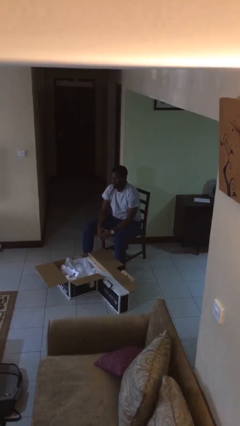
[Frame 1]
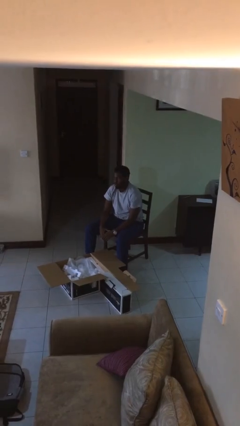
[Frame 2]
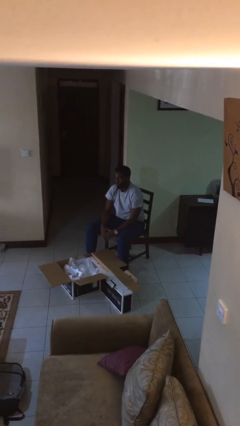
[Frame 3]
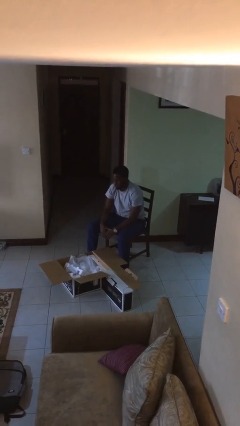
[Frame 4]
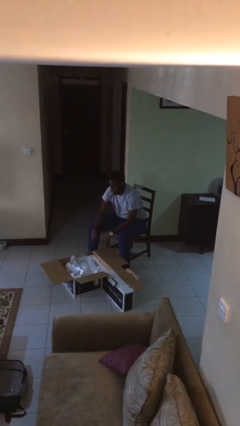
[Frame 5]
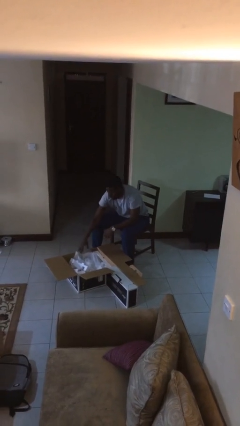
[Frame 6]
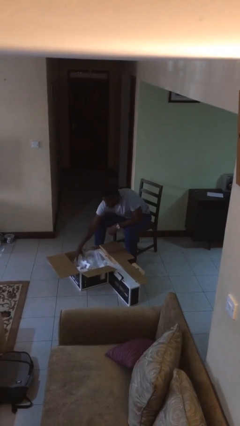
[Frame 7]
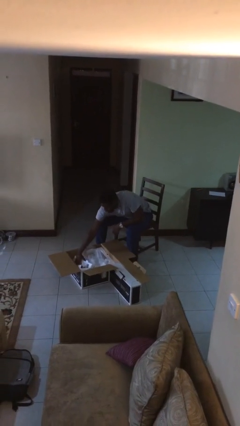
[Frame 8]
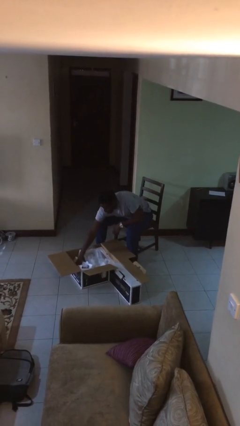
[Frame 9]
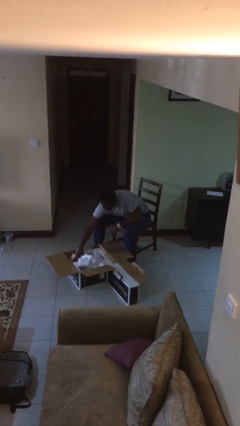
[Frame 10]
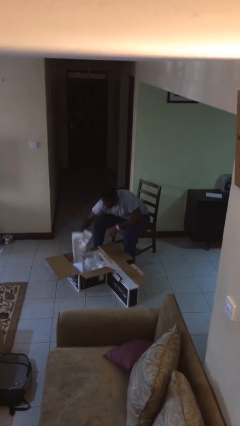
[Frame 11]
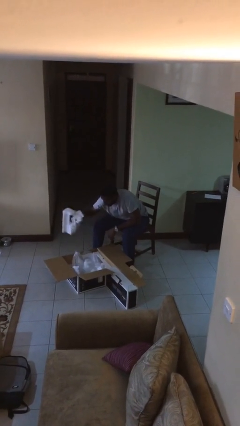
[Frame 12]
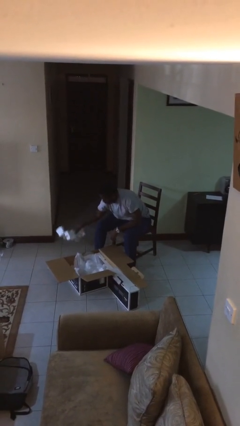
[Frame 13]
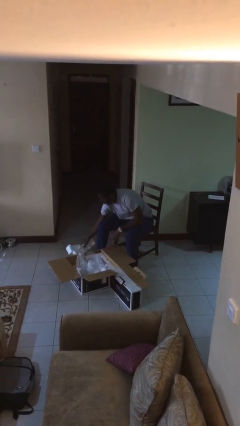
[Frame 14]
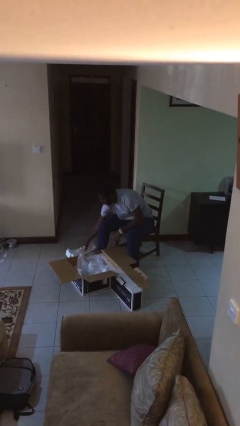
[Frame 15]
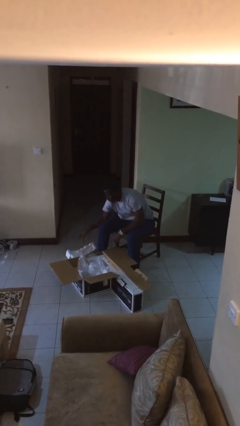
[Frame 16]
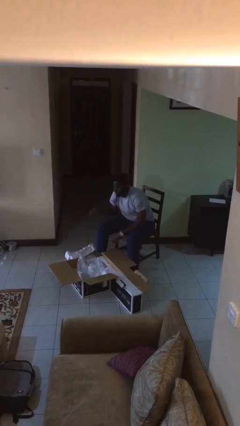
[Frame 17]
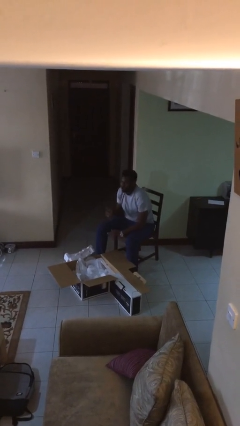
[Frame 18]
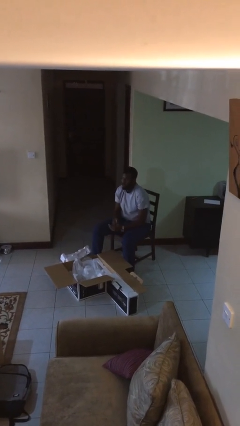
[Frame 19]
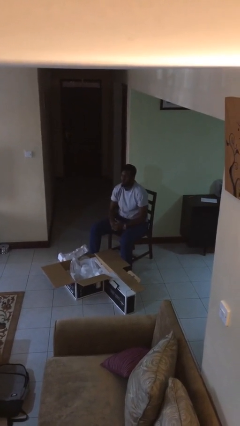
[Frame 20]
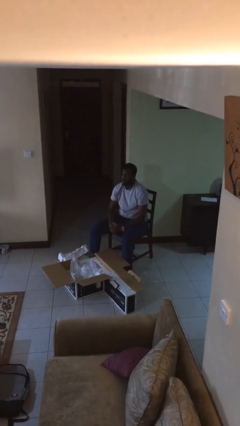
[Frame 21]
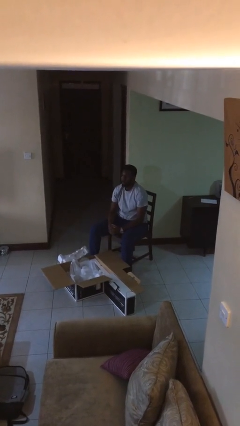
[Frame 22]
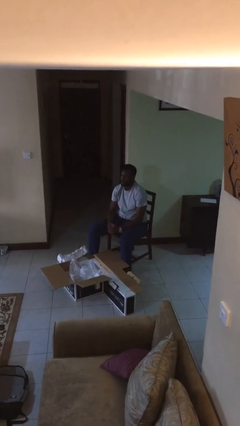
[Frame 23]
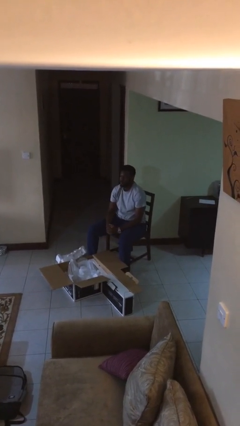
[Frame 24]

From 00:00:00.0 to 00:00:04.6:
person takes object from box

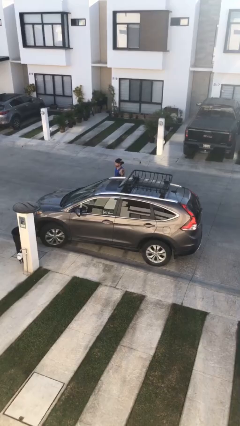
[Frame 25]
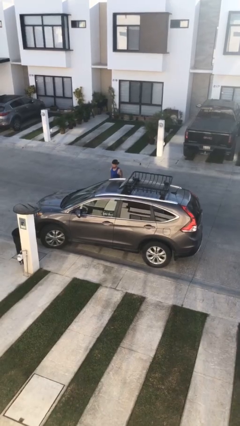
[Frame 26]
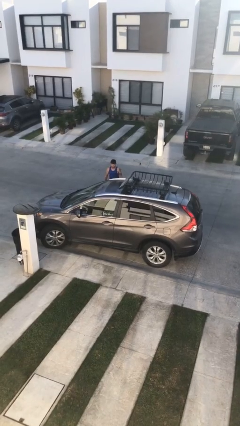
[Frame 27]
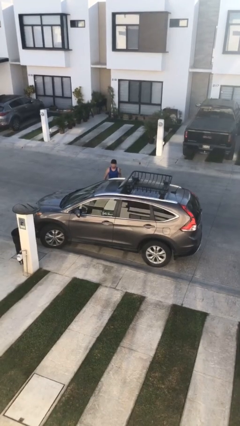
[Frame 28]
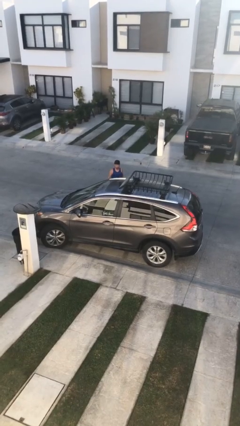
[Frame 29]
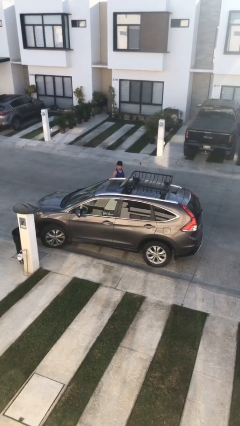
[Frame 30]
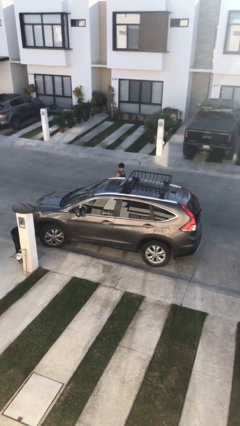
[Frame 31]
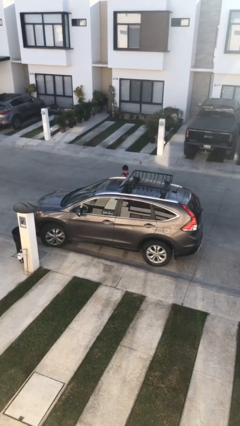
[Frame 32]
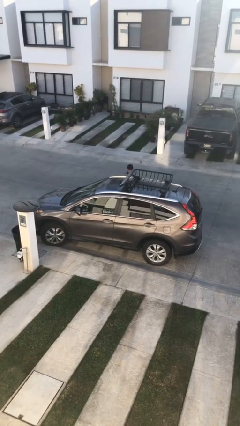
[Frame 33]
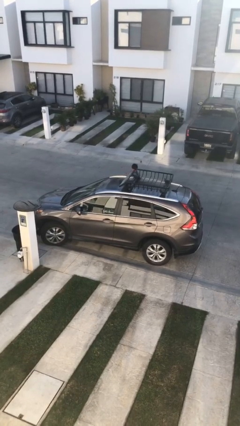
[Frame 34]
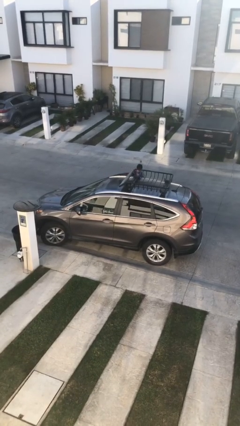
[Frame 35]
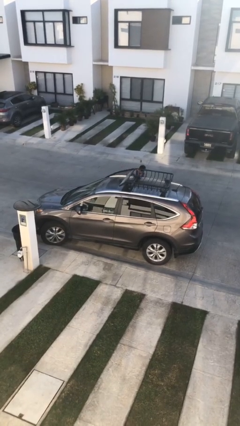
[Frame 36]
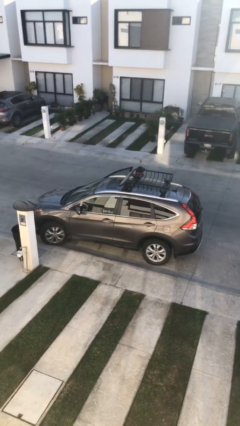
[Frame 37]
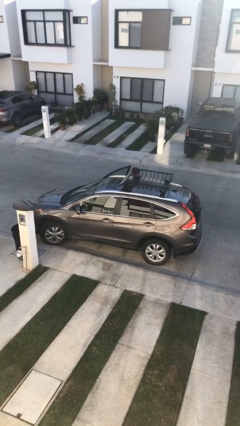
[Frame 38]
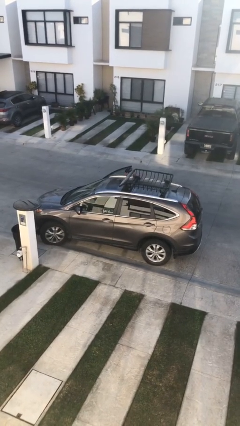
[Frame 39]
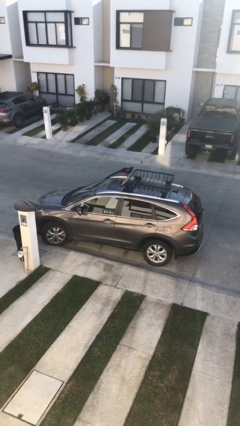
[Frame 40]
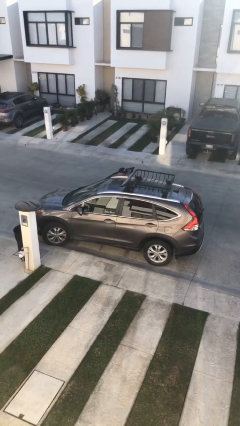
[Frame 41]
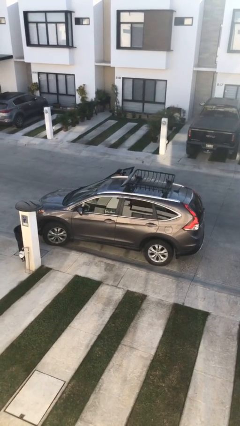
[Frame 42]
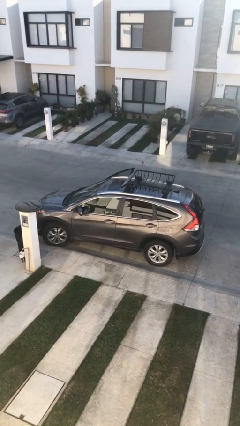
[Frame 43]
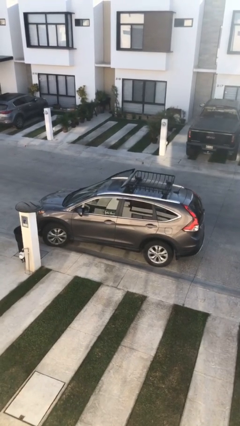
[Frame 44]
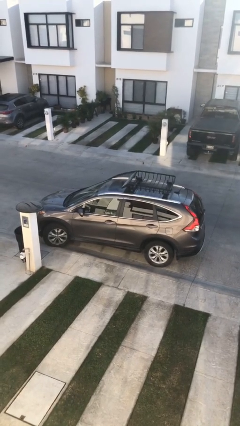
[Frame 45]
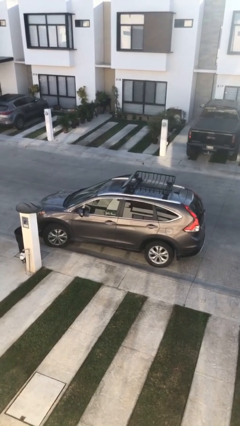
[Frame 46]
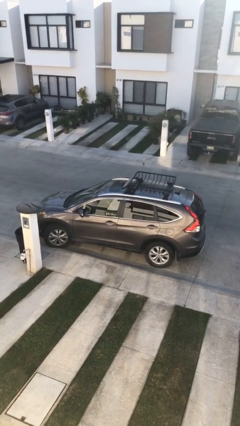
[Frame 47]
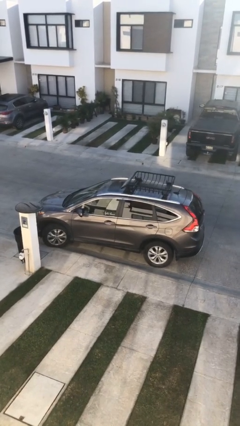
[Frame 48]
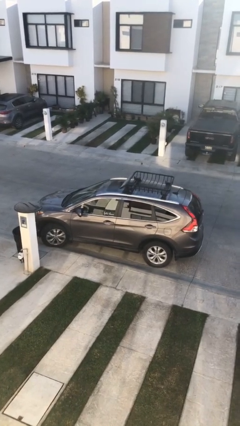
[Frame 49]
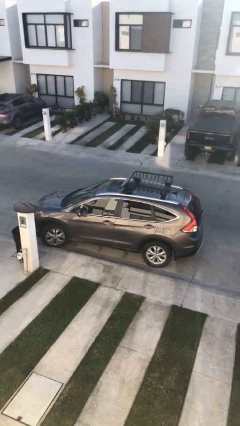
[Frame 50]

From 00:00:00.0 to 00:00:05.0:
car picks up person

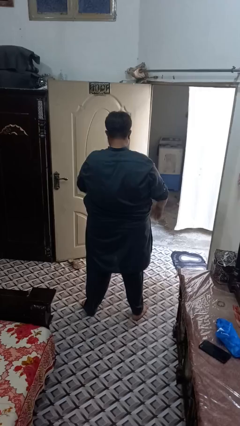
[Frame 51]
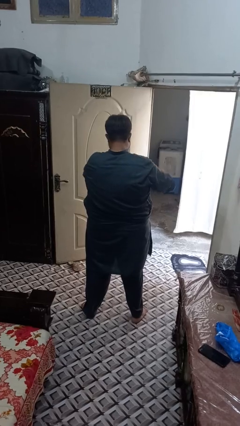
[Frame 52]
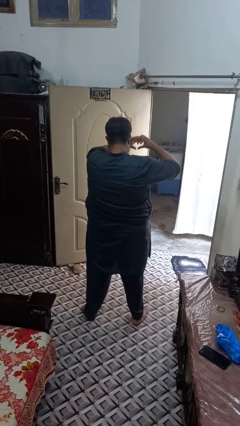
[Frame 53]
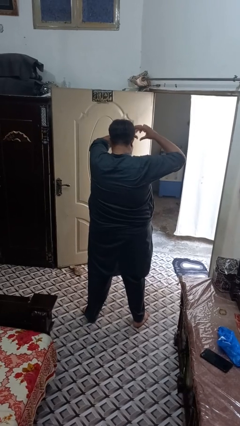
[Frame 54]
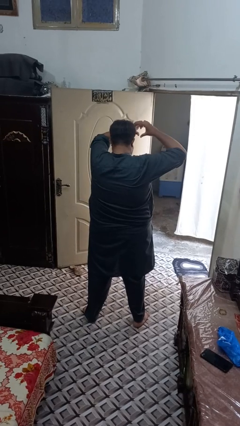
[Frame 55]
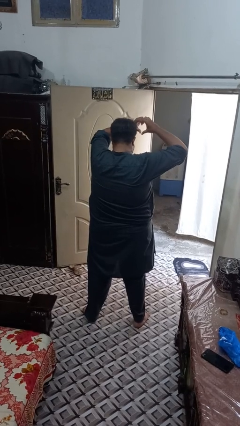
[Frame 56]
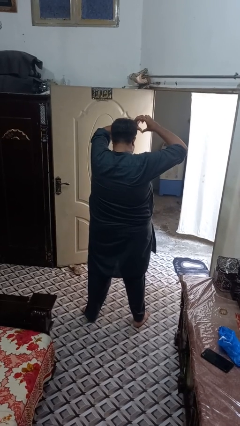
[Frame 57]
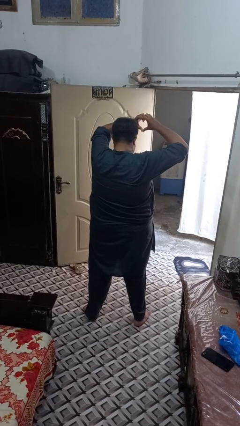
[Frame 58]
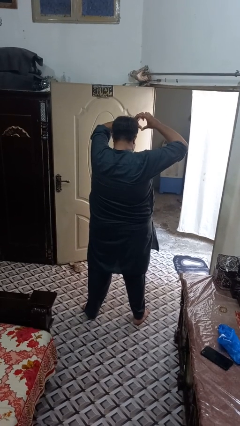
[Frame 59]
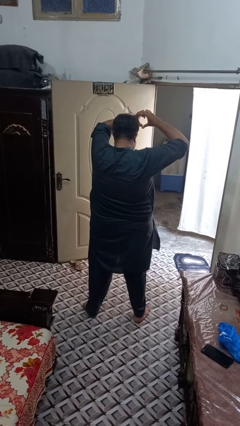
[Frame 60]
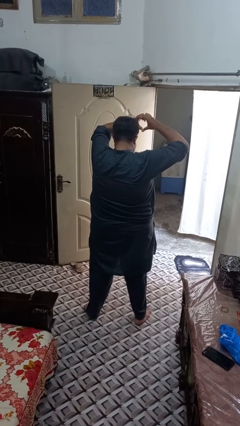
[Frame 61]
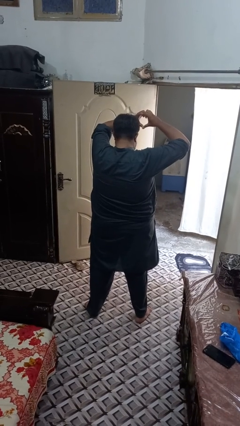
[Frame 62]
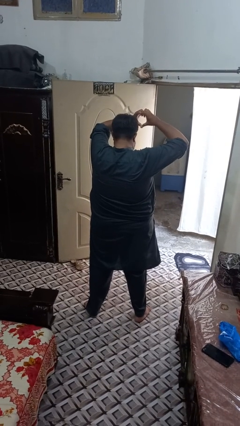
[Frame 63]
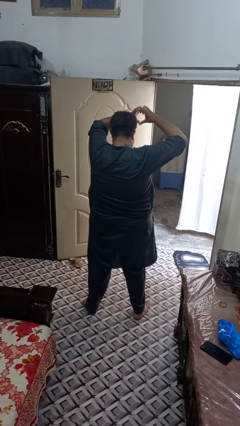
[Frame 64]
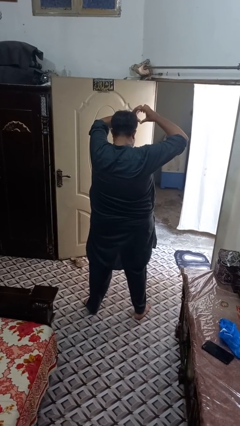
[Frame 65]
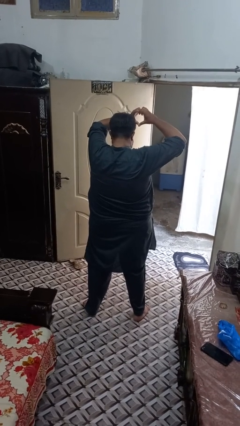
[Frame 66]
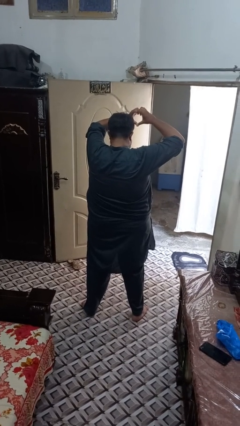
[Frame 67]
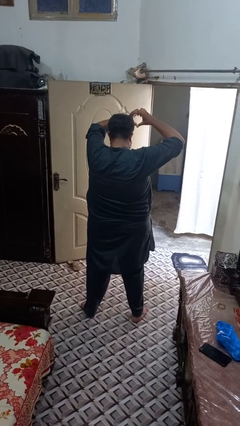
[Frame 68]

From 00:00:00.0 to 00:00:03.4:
person gestures heart

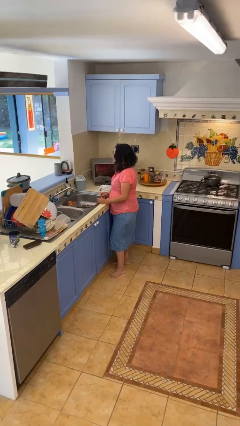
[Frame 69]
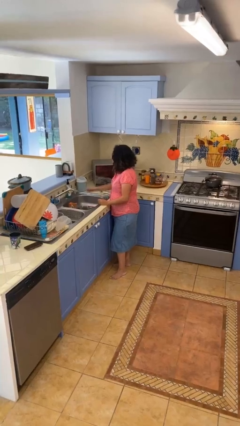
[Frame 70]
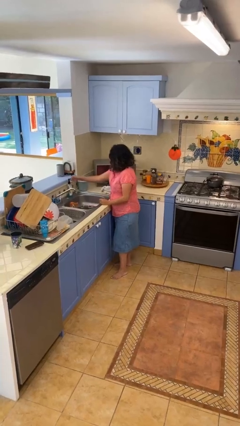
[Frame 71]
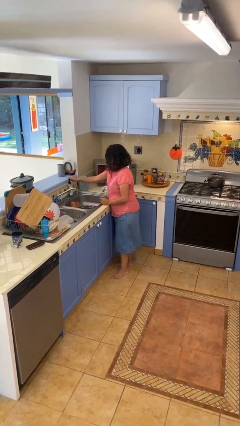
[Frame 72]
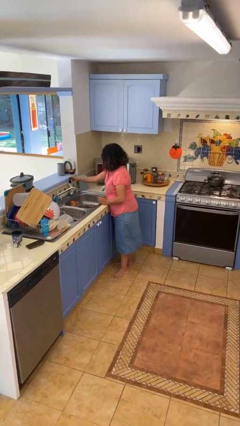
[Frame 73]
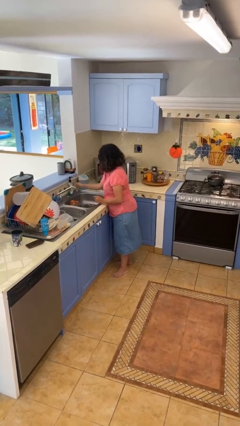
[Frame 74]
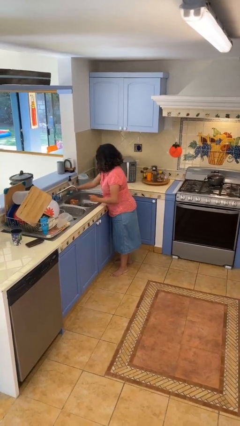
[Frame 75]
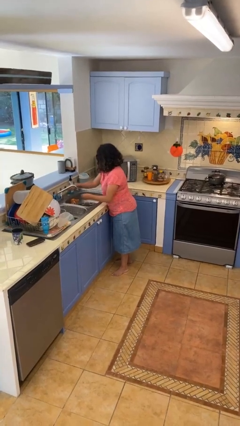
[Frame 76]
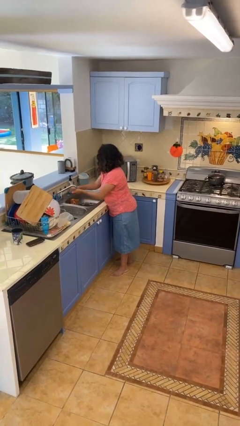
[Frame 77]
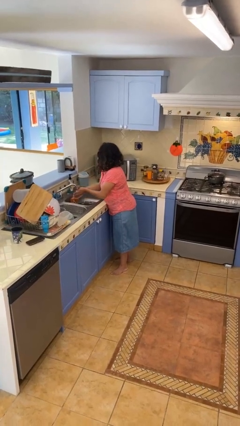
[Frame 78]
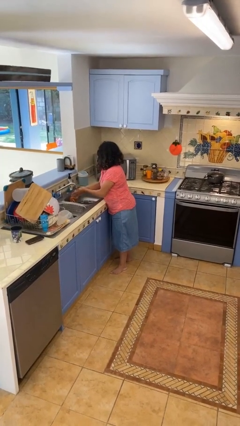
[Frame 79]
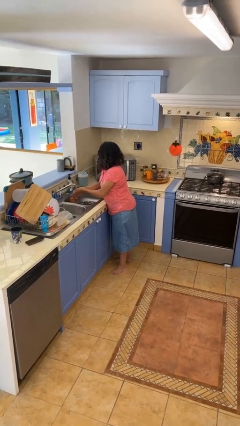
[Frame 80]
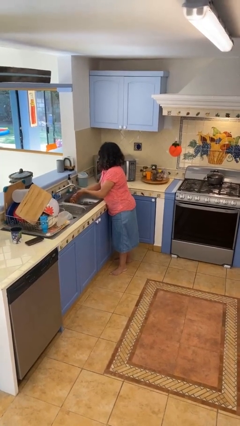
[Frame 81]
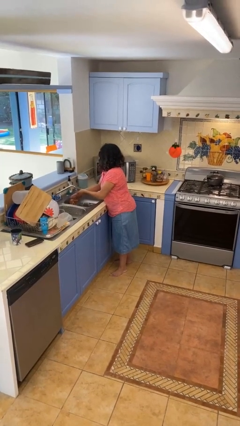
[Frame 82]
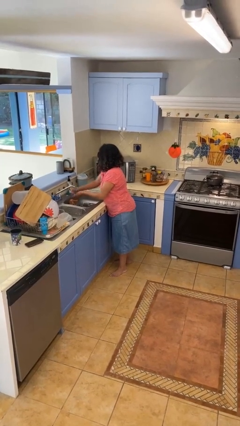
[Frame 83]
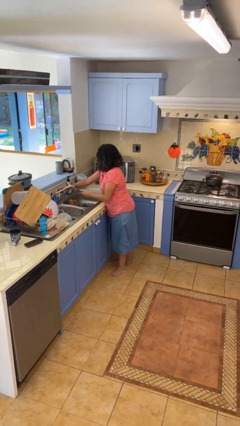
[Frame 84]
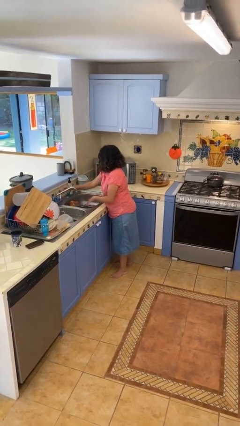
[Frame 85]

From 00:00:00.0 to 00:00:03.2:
person washes hands

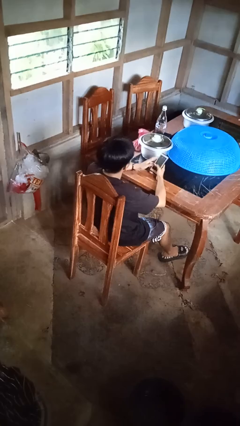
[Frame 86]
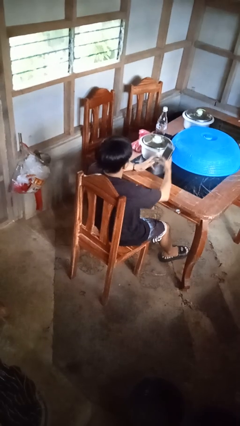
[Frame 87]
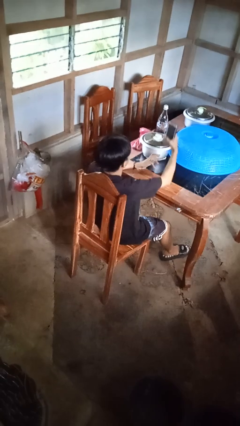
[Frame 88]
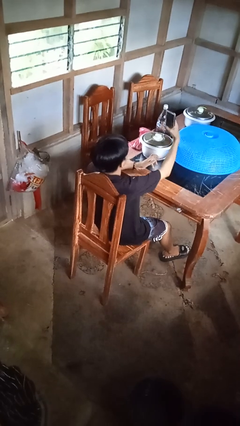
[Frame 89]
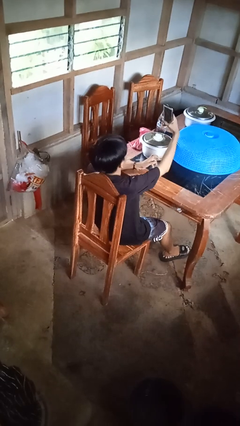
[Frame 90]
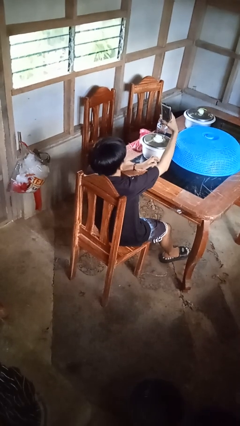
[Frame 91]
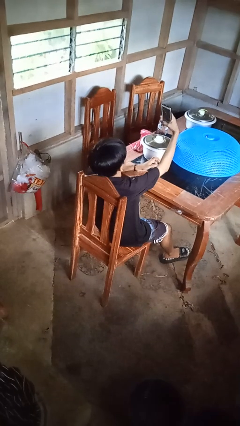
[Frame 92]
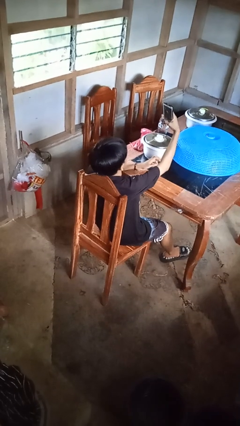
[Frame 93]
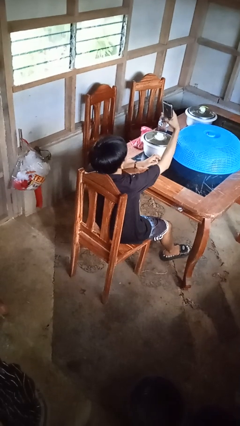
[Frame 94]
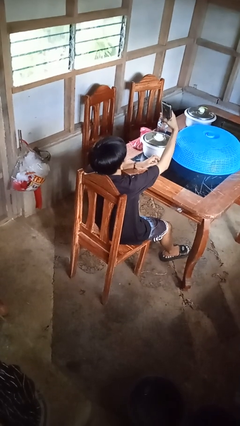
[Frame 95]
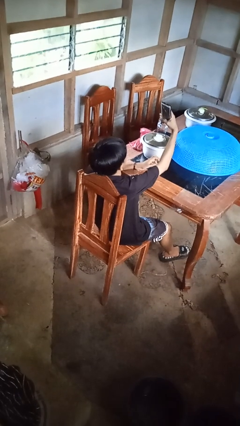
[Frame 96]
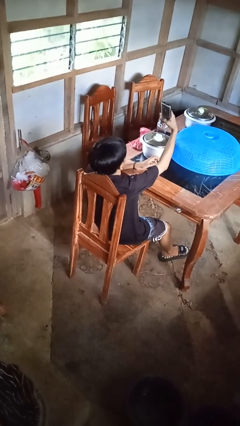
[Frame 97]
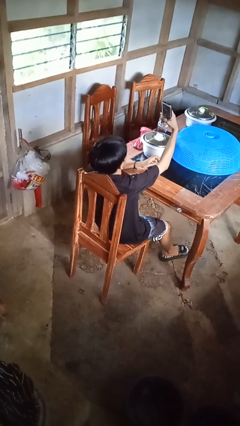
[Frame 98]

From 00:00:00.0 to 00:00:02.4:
person takes selfie
